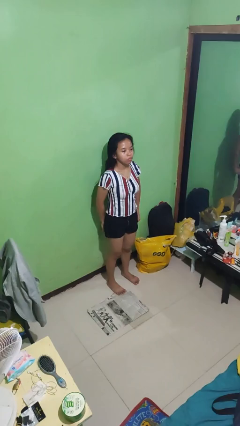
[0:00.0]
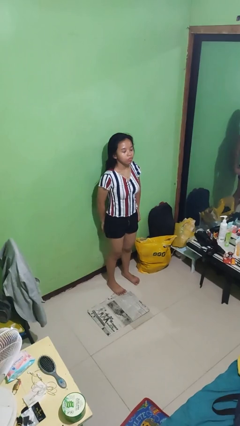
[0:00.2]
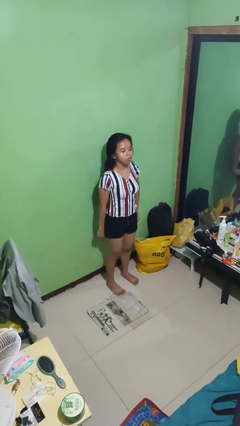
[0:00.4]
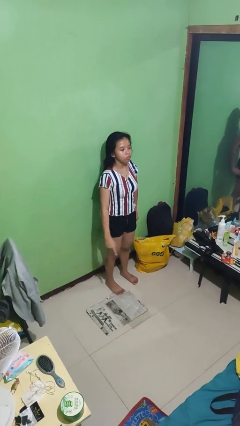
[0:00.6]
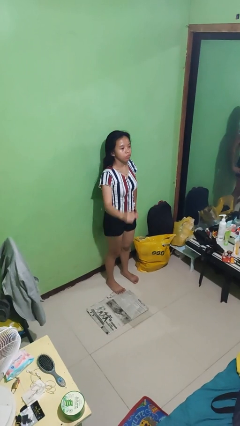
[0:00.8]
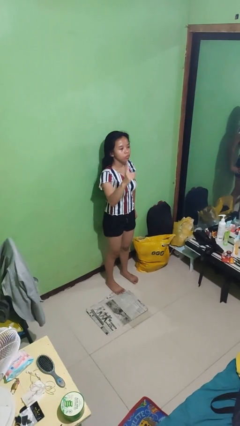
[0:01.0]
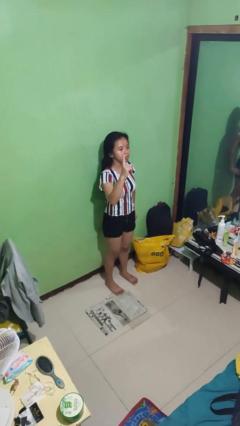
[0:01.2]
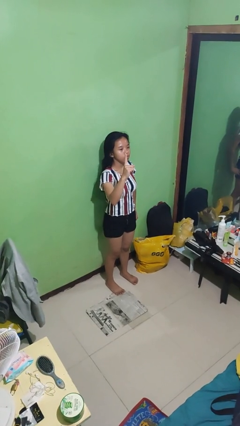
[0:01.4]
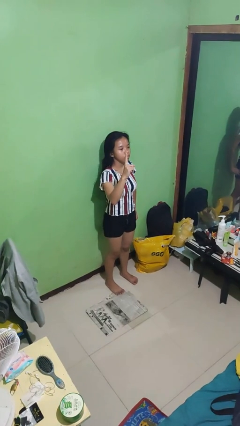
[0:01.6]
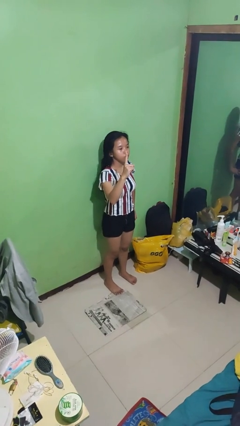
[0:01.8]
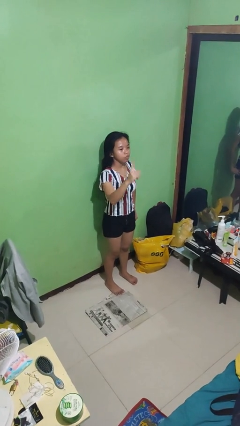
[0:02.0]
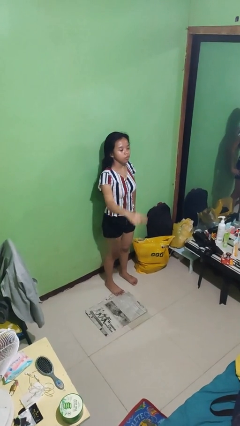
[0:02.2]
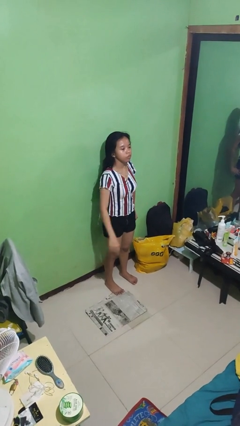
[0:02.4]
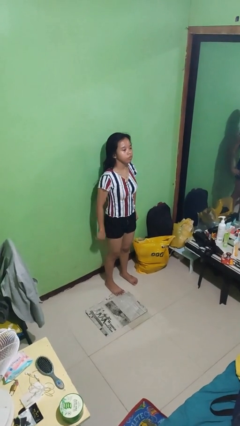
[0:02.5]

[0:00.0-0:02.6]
person gestures number one

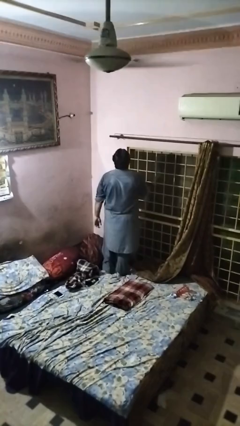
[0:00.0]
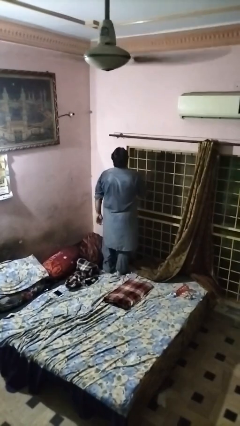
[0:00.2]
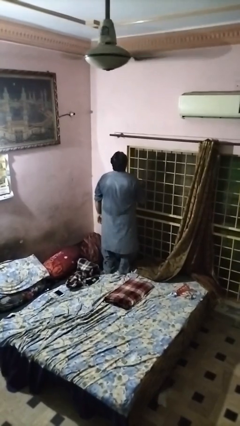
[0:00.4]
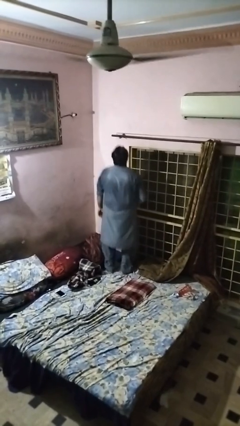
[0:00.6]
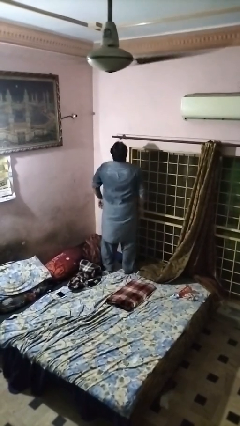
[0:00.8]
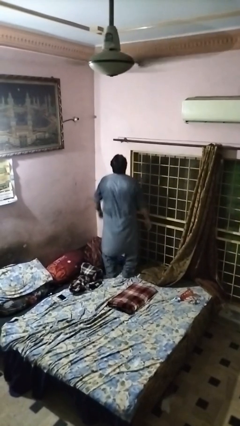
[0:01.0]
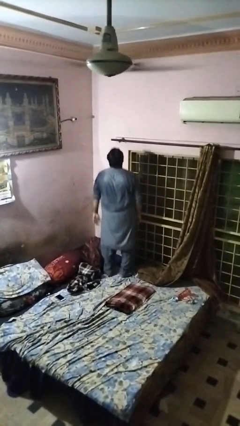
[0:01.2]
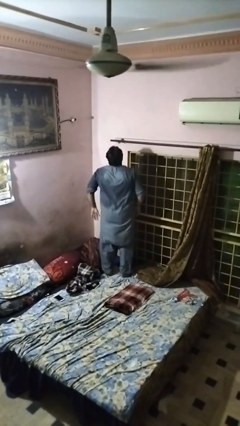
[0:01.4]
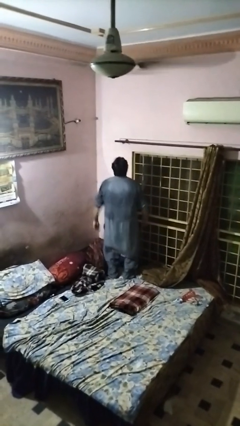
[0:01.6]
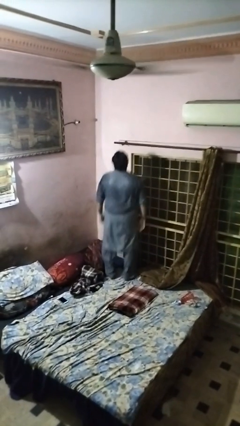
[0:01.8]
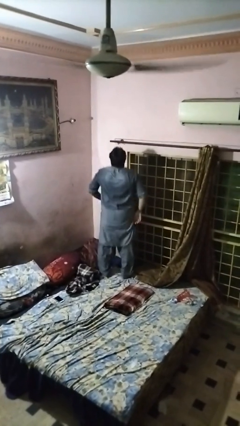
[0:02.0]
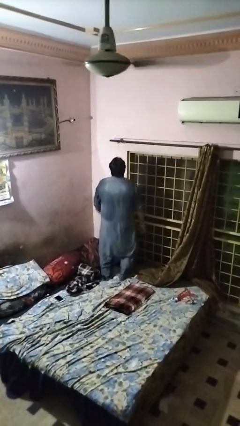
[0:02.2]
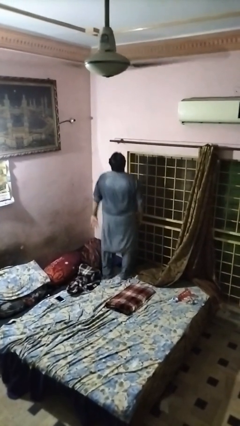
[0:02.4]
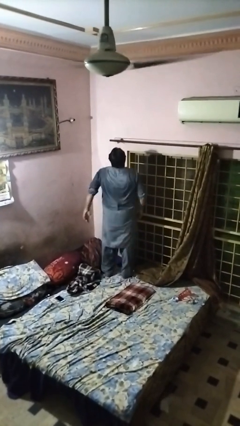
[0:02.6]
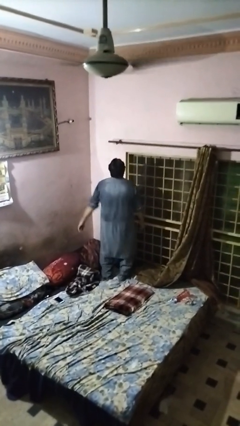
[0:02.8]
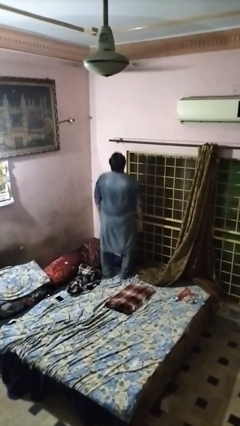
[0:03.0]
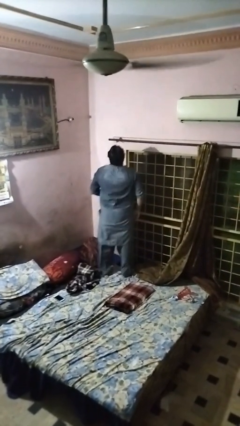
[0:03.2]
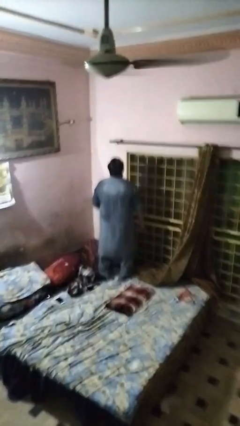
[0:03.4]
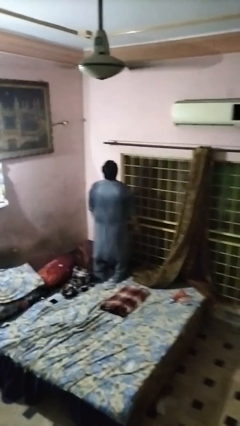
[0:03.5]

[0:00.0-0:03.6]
person jumps on bed

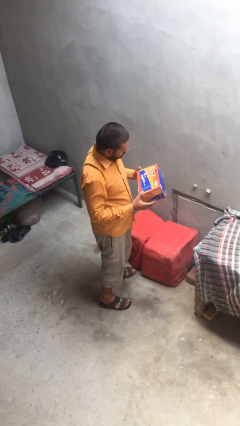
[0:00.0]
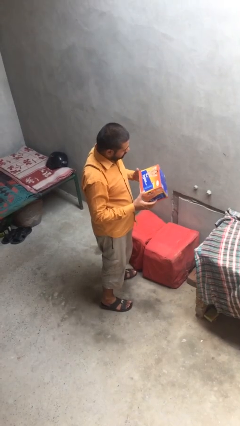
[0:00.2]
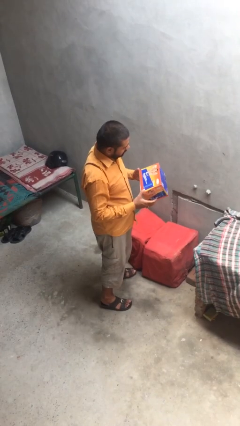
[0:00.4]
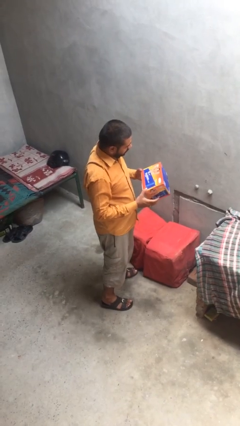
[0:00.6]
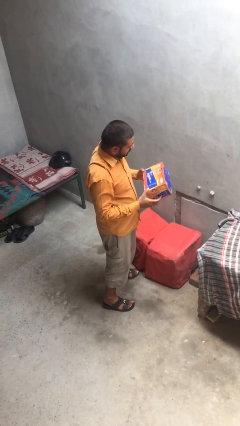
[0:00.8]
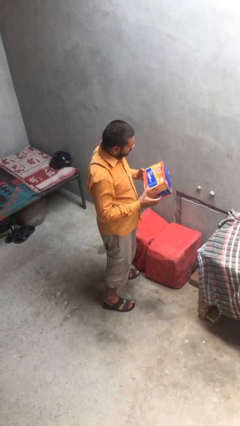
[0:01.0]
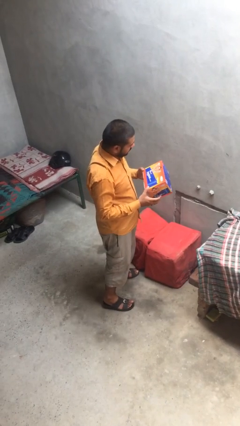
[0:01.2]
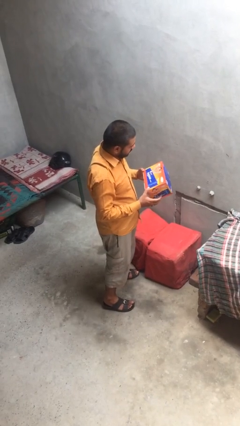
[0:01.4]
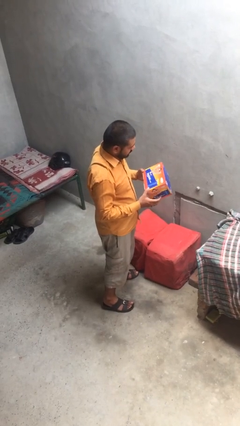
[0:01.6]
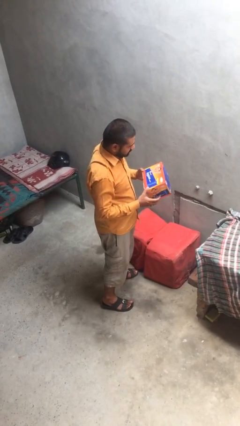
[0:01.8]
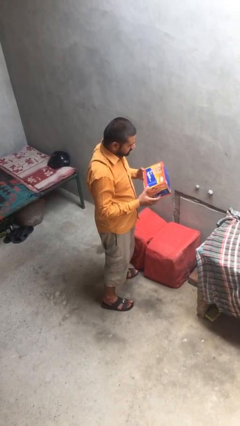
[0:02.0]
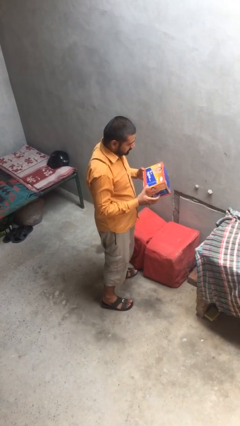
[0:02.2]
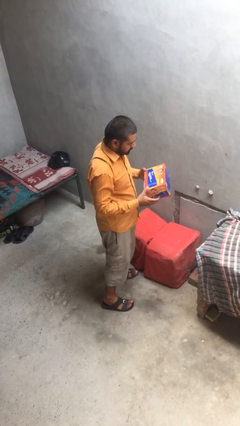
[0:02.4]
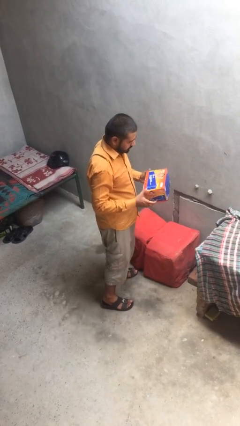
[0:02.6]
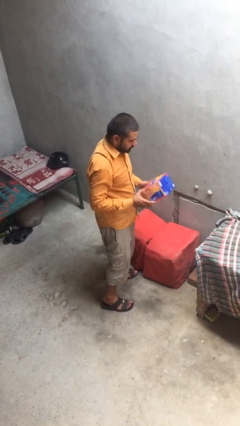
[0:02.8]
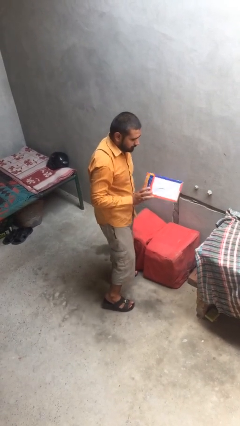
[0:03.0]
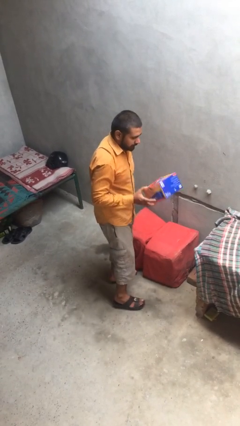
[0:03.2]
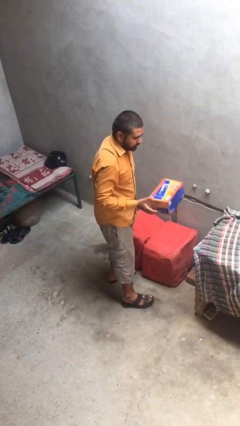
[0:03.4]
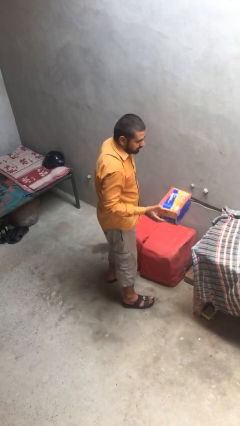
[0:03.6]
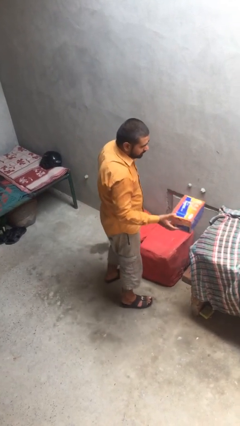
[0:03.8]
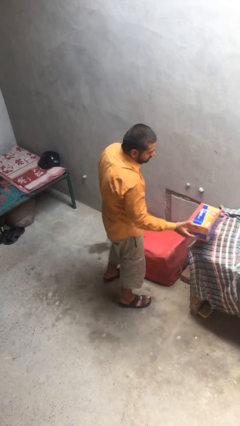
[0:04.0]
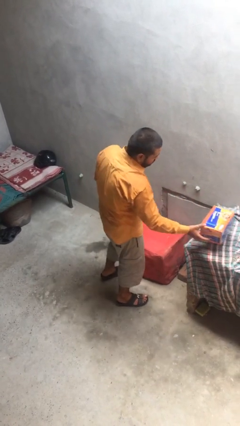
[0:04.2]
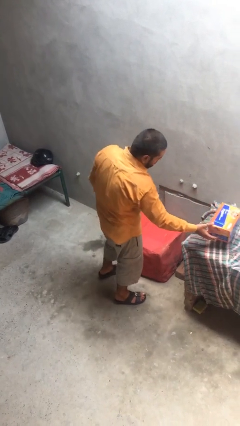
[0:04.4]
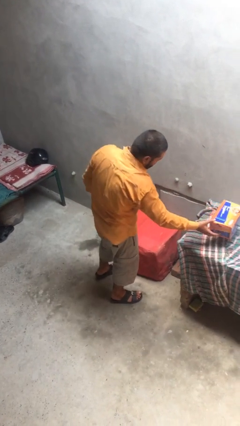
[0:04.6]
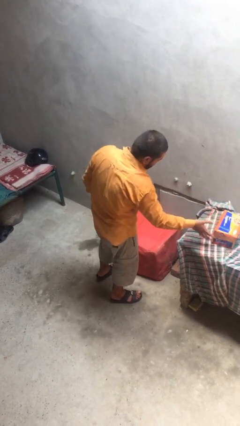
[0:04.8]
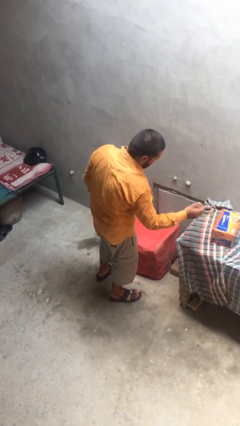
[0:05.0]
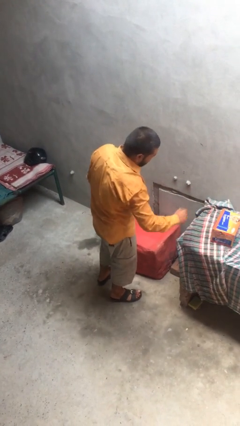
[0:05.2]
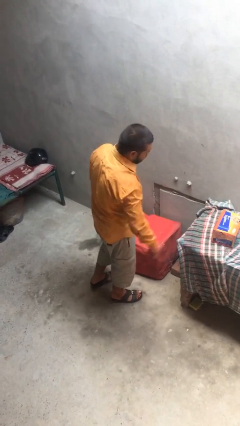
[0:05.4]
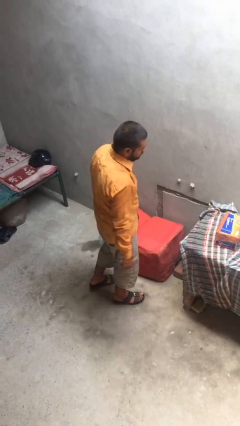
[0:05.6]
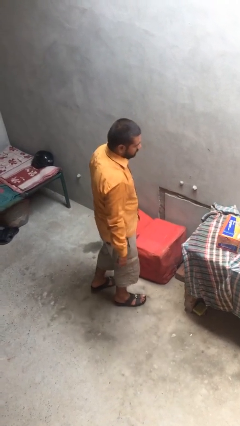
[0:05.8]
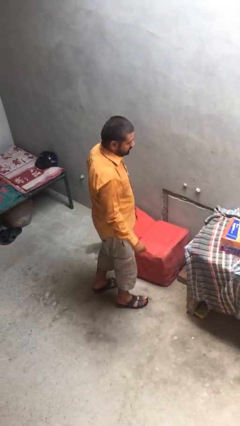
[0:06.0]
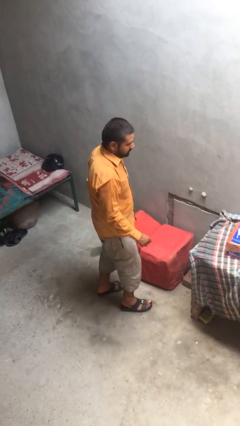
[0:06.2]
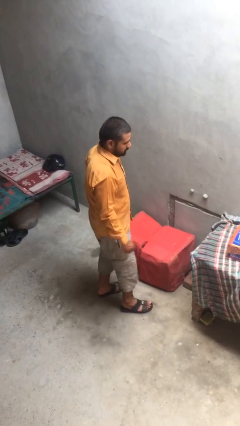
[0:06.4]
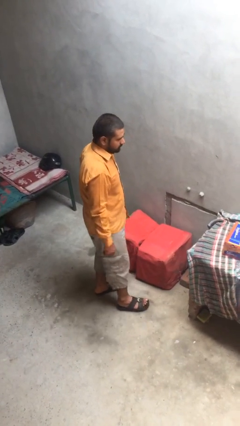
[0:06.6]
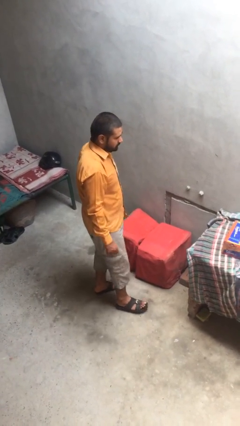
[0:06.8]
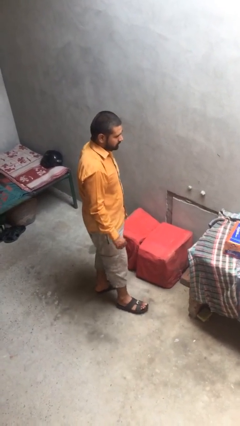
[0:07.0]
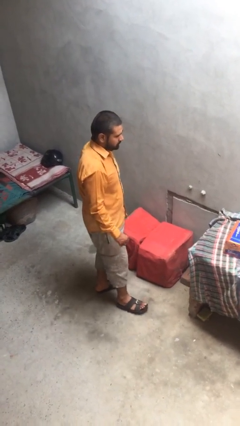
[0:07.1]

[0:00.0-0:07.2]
person puts down object on shelf

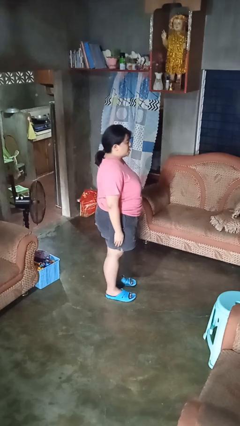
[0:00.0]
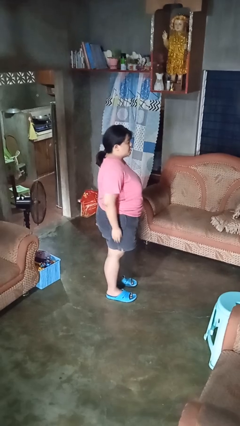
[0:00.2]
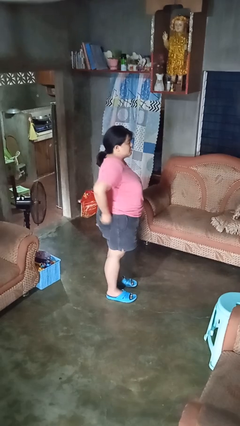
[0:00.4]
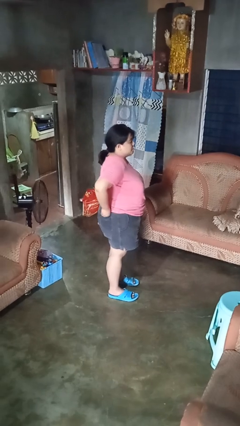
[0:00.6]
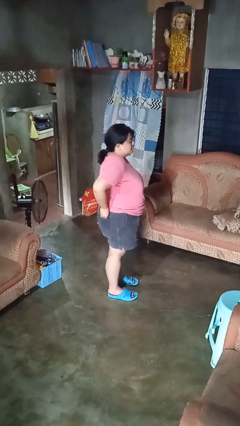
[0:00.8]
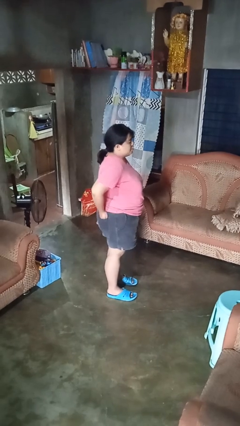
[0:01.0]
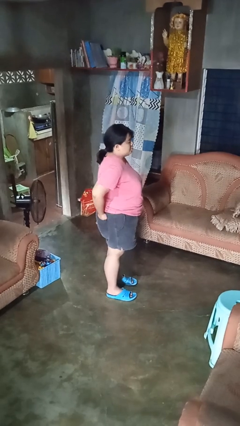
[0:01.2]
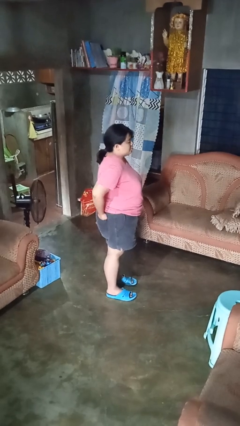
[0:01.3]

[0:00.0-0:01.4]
person puts hands in back pockets

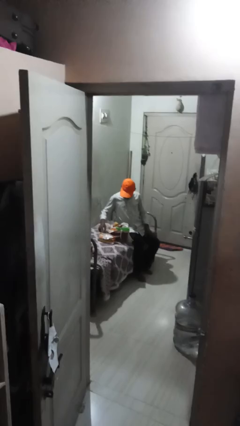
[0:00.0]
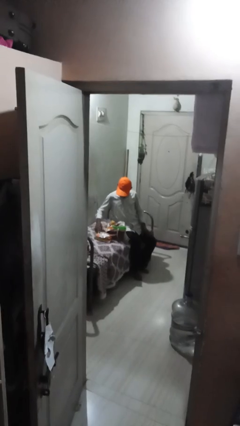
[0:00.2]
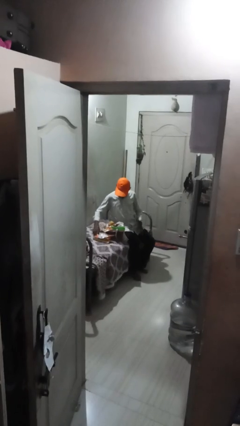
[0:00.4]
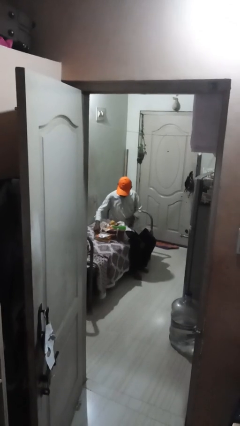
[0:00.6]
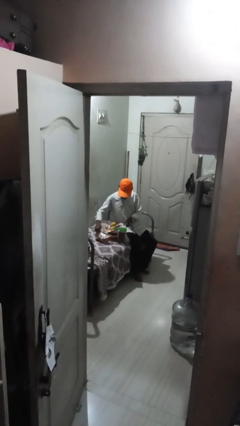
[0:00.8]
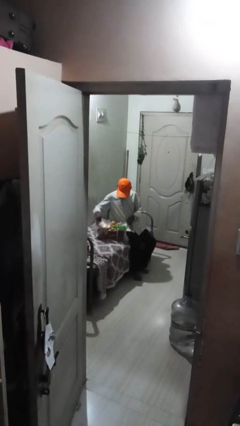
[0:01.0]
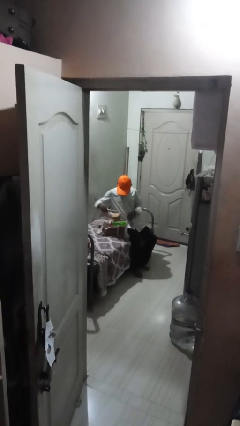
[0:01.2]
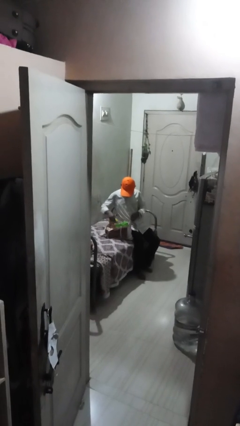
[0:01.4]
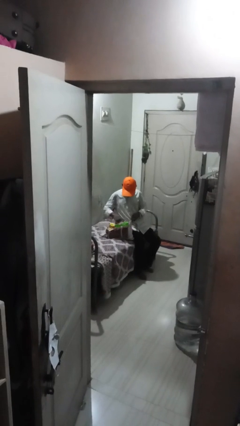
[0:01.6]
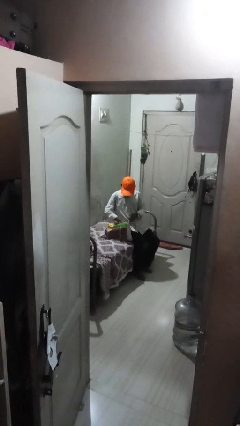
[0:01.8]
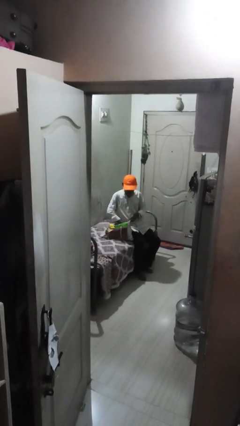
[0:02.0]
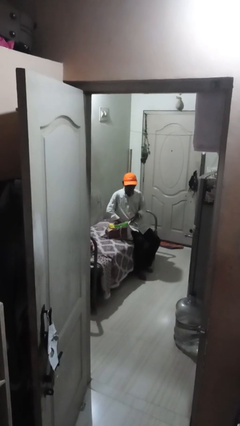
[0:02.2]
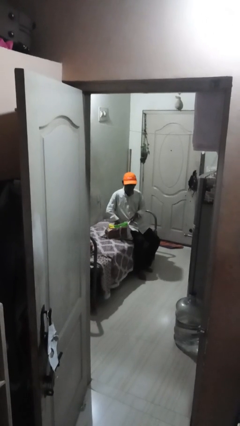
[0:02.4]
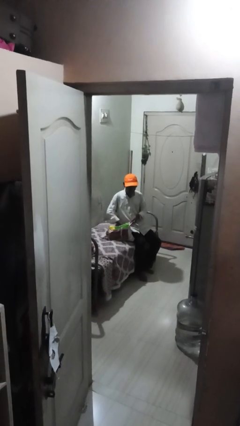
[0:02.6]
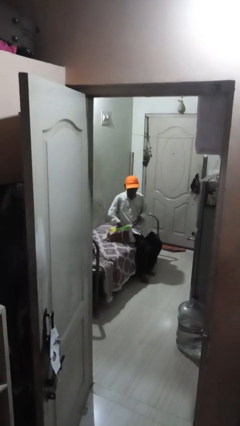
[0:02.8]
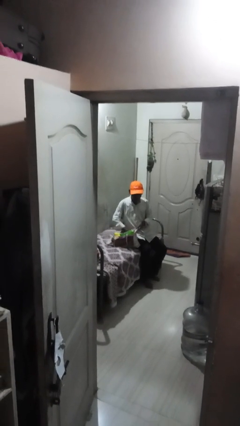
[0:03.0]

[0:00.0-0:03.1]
person puts object into bag
